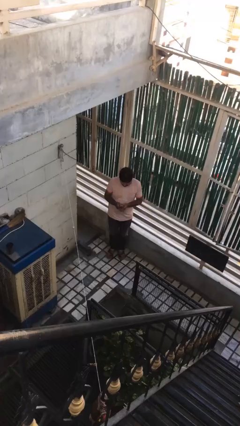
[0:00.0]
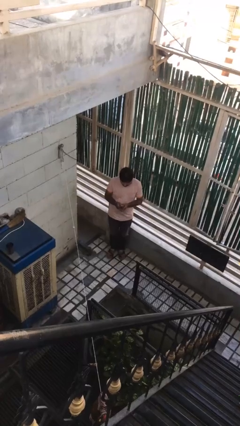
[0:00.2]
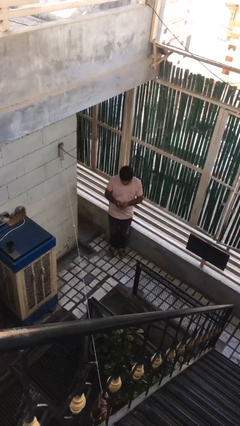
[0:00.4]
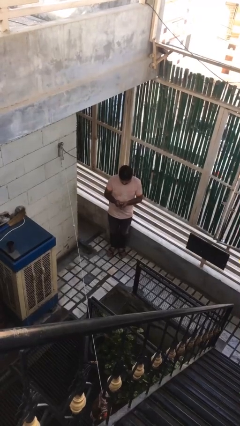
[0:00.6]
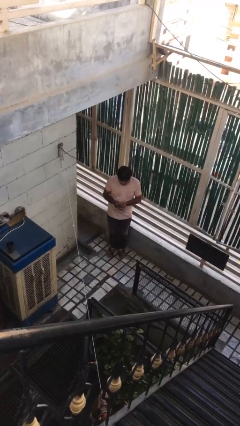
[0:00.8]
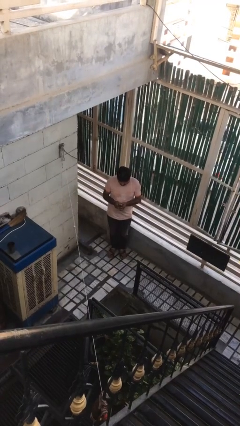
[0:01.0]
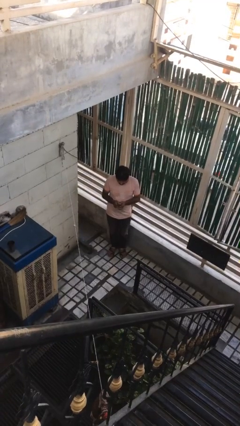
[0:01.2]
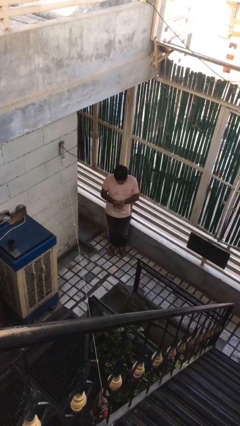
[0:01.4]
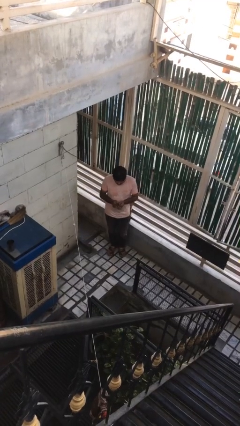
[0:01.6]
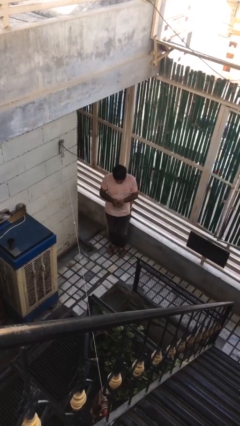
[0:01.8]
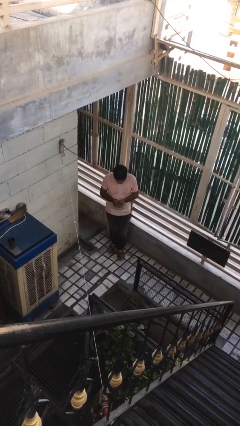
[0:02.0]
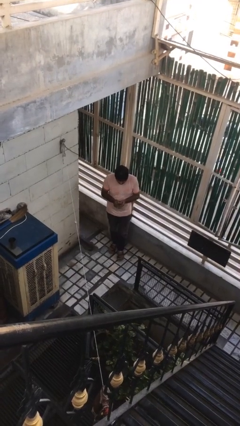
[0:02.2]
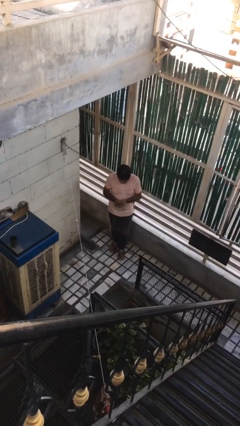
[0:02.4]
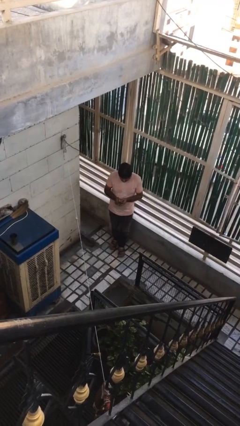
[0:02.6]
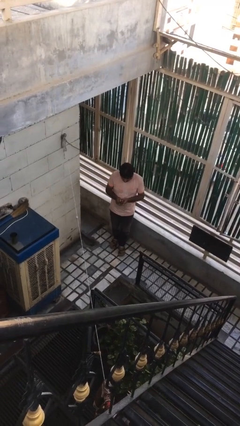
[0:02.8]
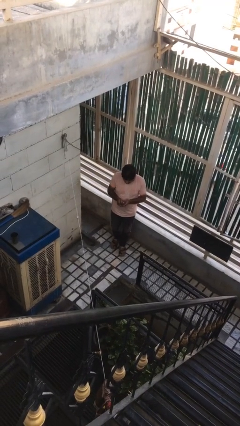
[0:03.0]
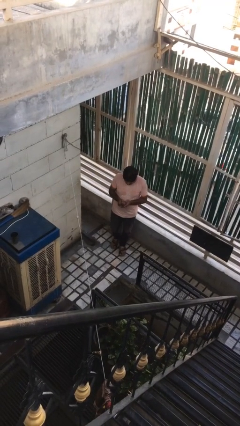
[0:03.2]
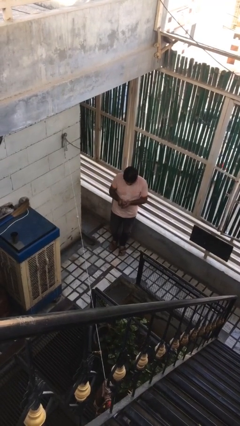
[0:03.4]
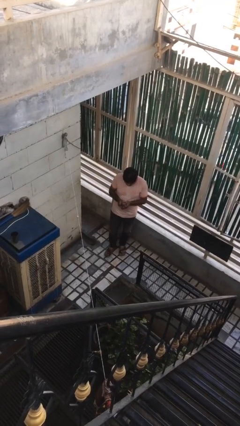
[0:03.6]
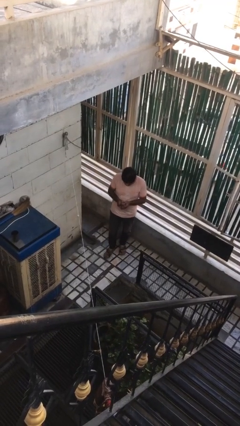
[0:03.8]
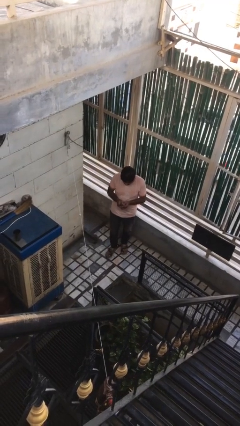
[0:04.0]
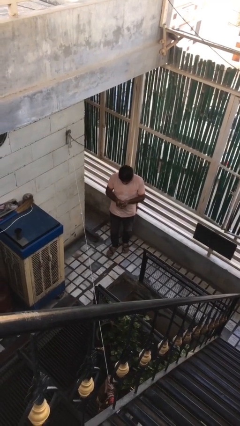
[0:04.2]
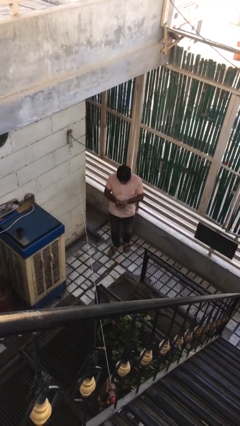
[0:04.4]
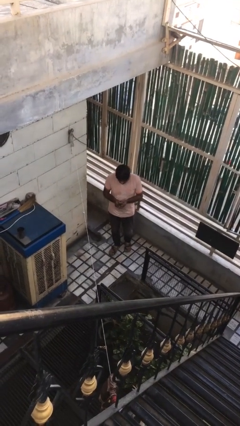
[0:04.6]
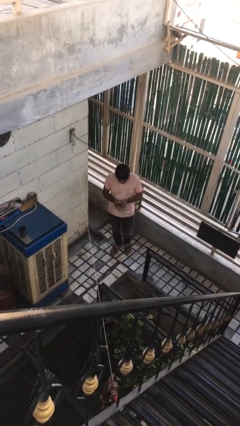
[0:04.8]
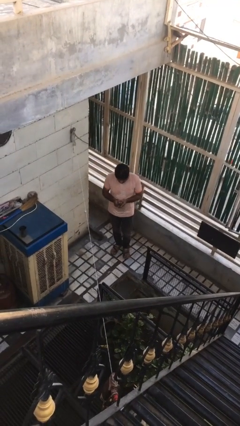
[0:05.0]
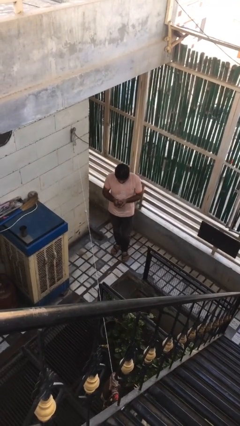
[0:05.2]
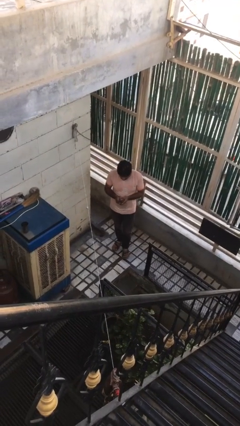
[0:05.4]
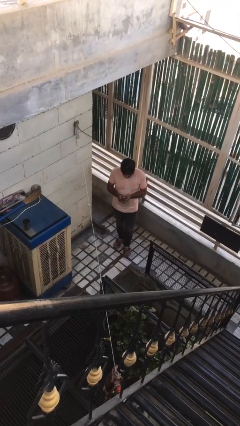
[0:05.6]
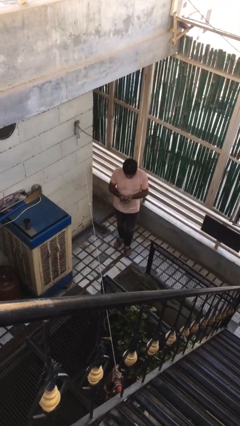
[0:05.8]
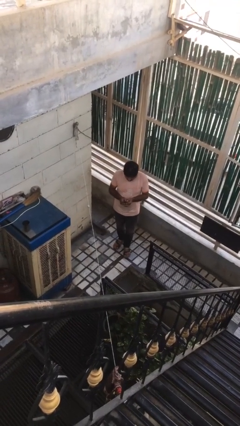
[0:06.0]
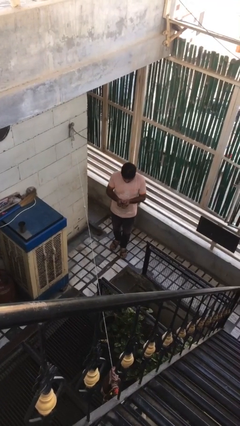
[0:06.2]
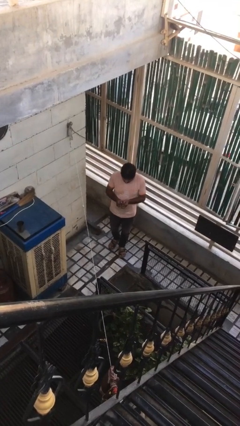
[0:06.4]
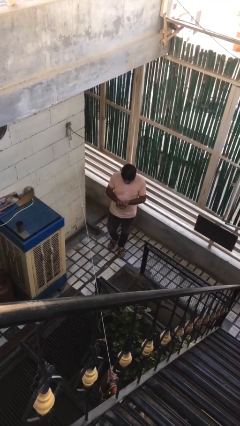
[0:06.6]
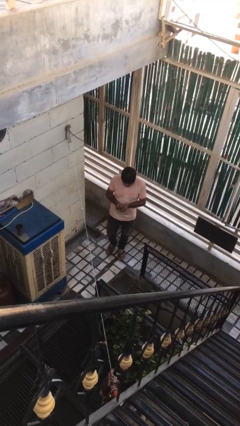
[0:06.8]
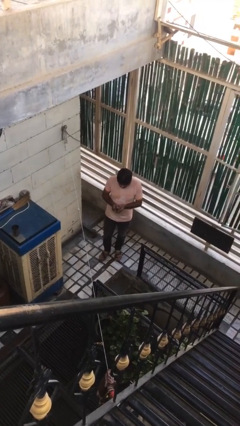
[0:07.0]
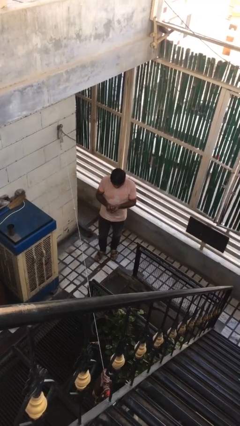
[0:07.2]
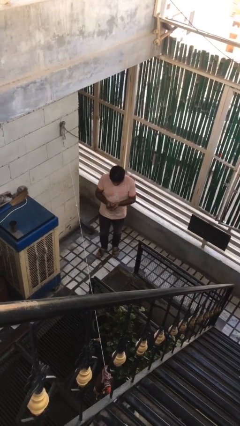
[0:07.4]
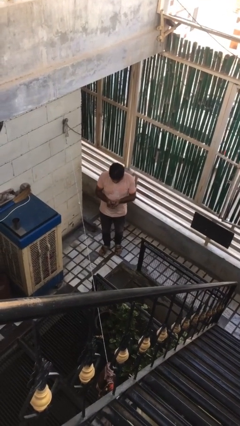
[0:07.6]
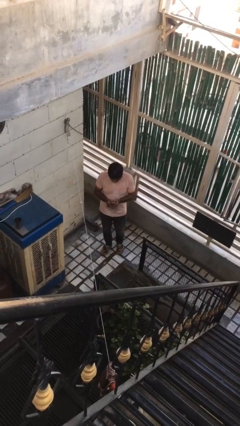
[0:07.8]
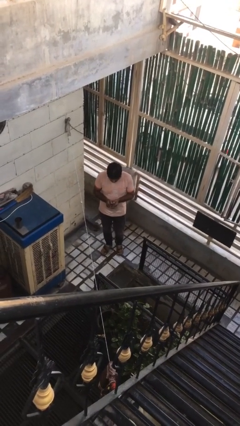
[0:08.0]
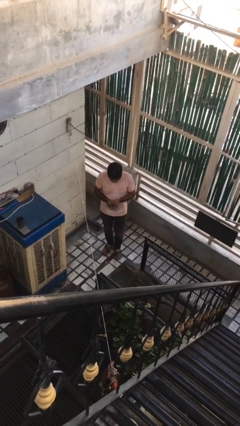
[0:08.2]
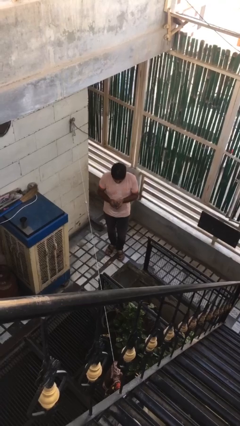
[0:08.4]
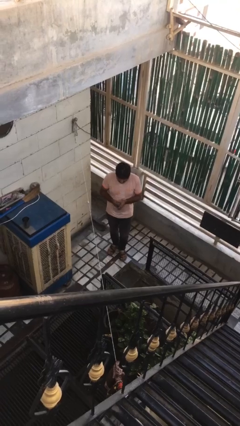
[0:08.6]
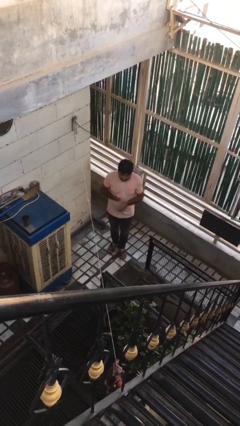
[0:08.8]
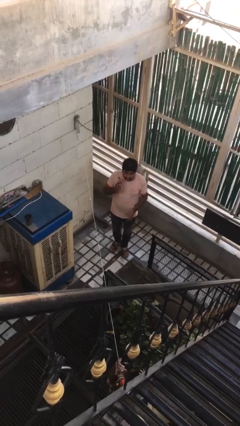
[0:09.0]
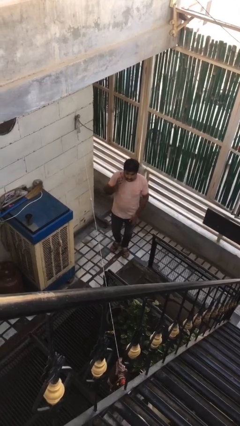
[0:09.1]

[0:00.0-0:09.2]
person texts on phone

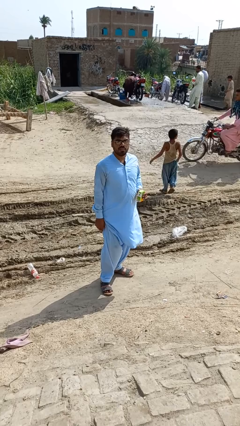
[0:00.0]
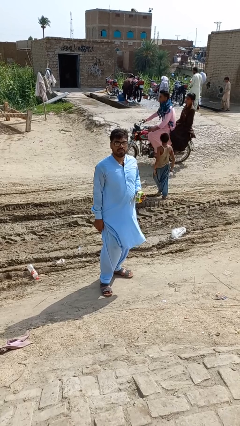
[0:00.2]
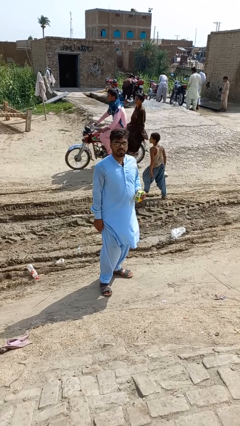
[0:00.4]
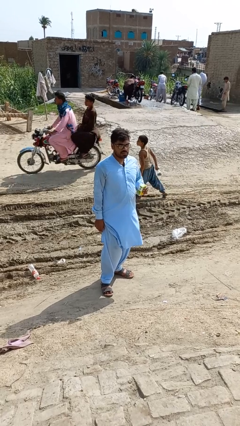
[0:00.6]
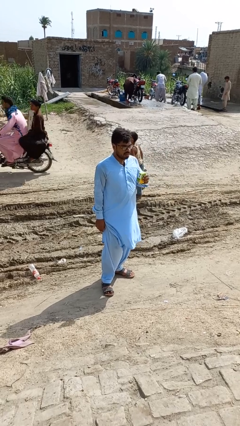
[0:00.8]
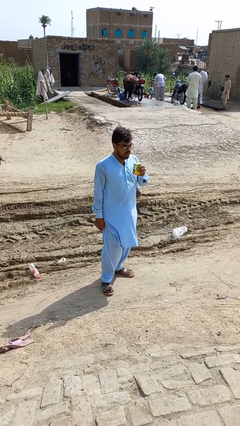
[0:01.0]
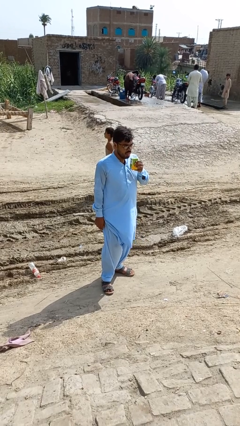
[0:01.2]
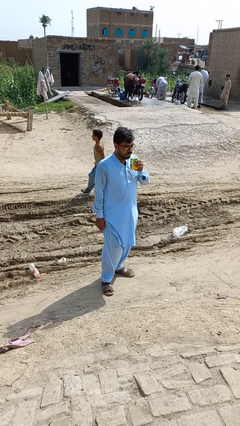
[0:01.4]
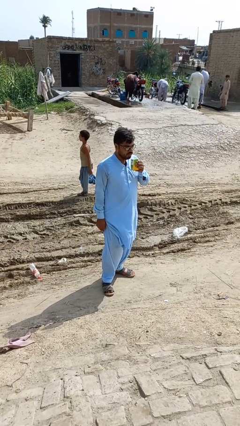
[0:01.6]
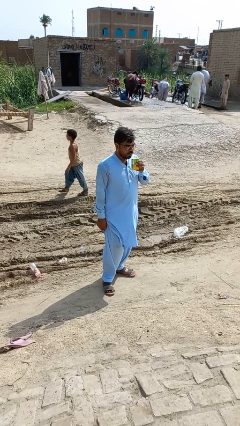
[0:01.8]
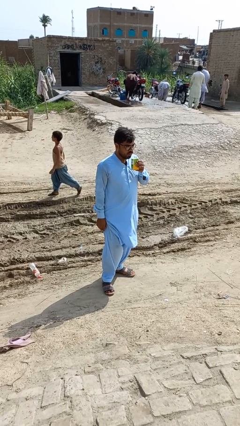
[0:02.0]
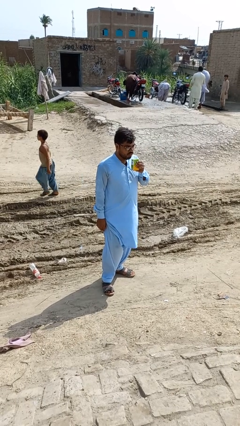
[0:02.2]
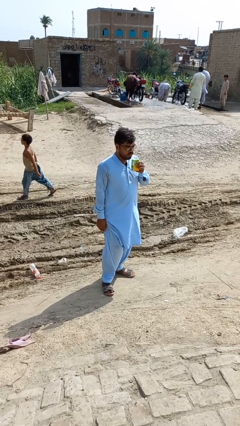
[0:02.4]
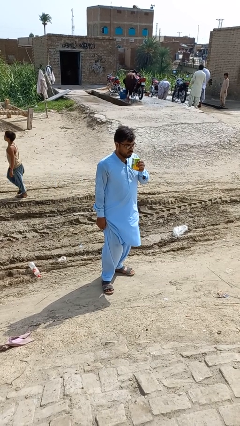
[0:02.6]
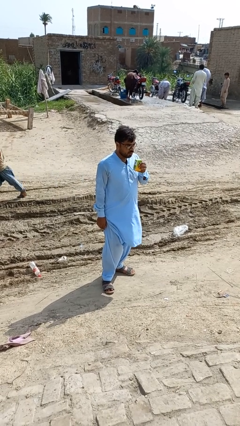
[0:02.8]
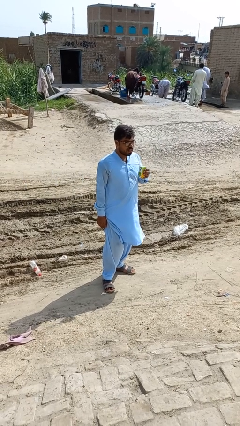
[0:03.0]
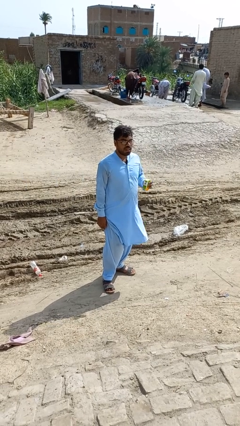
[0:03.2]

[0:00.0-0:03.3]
person drinks from straw

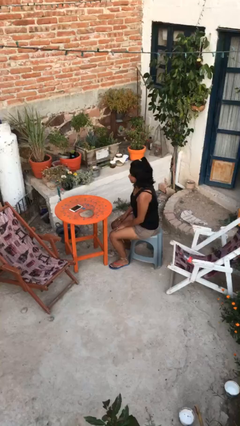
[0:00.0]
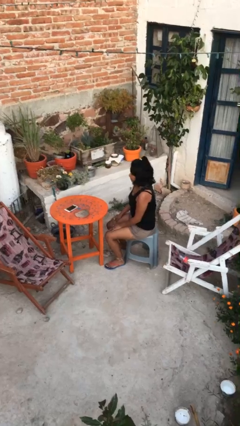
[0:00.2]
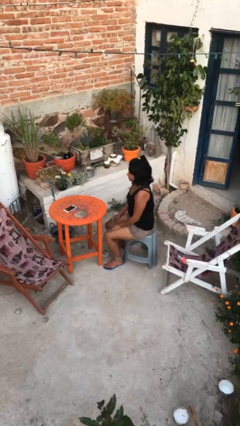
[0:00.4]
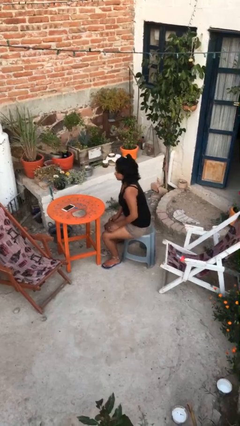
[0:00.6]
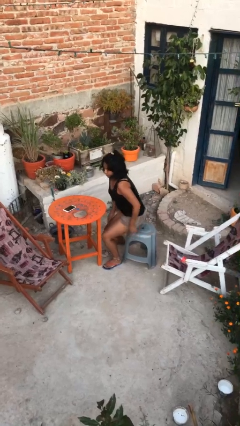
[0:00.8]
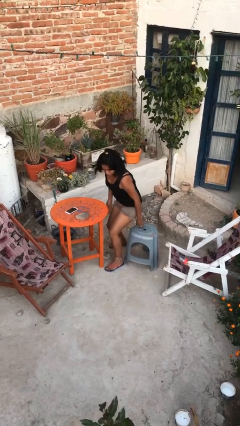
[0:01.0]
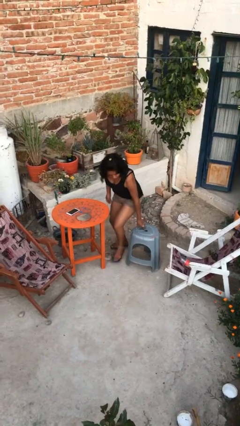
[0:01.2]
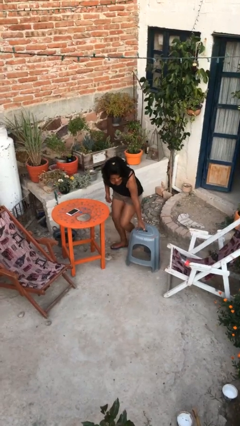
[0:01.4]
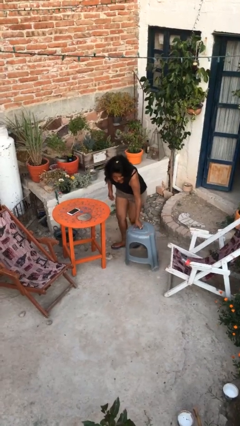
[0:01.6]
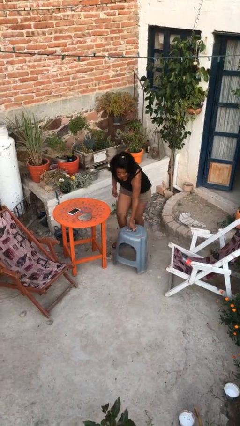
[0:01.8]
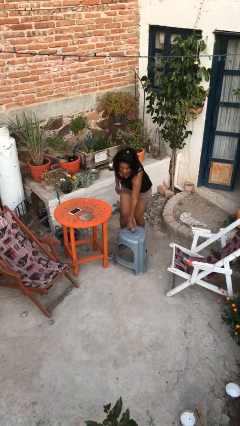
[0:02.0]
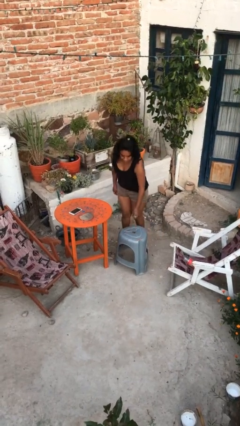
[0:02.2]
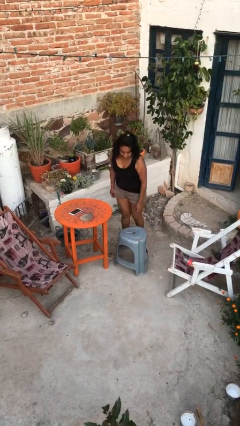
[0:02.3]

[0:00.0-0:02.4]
person stands up

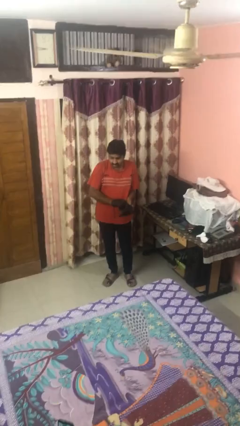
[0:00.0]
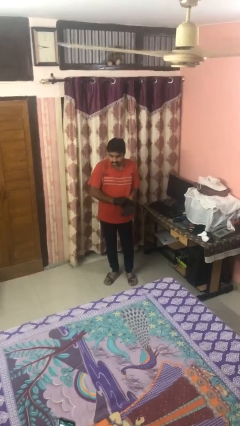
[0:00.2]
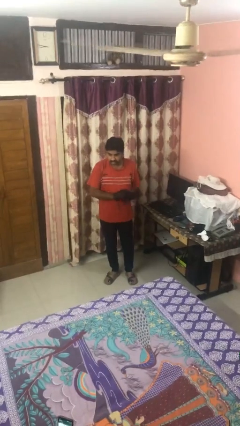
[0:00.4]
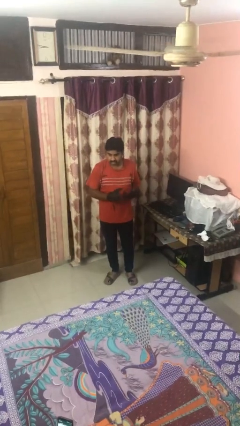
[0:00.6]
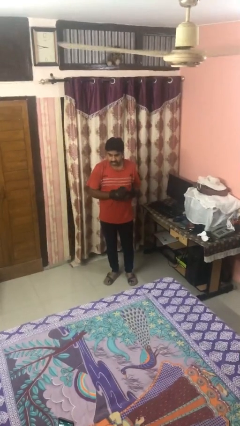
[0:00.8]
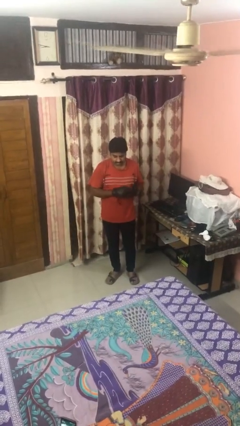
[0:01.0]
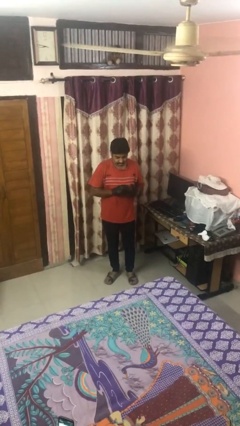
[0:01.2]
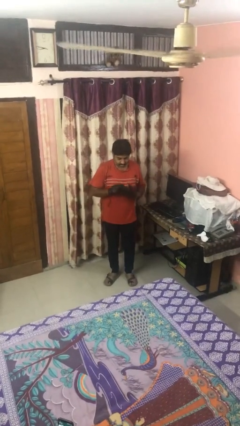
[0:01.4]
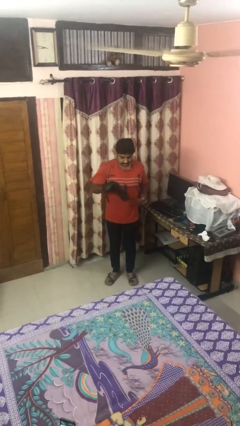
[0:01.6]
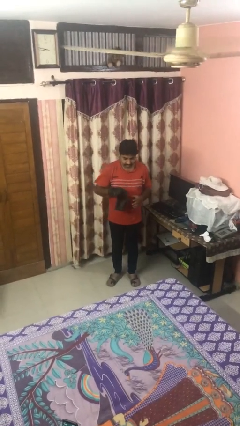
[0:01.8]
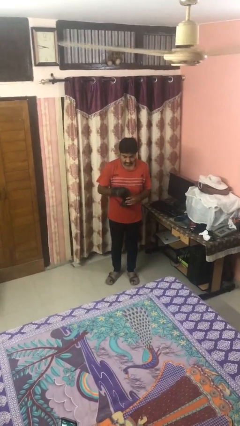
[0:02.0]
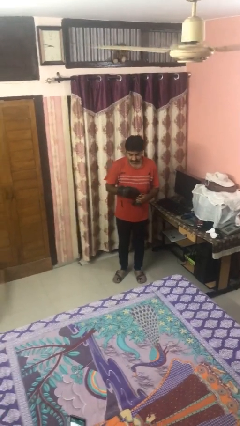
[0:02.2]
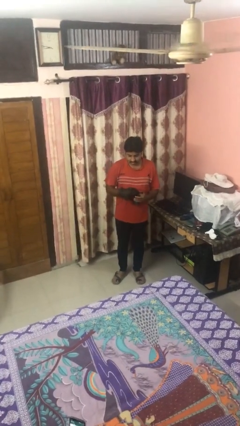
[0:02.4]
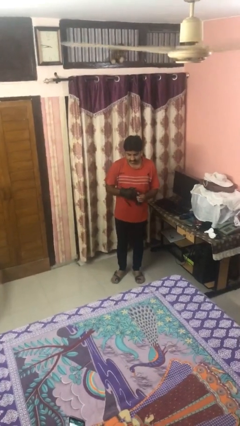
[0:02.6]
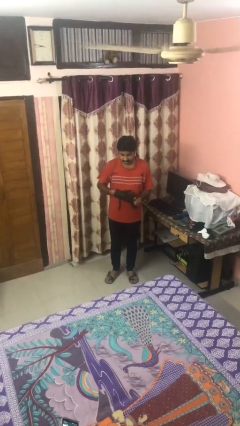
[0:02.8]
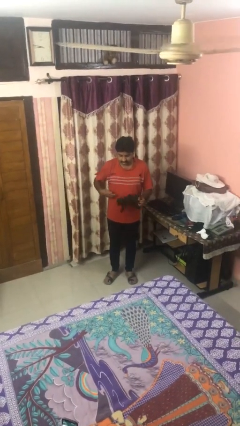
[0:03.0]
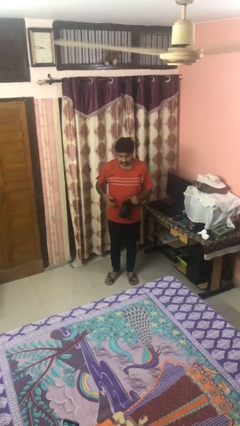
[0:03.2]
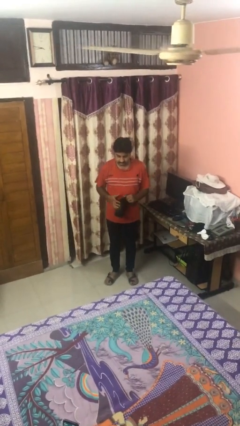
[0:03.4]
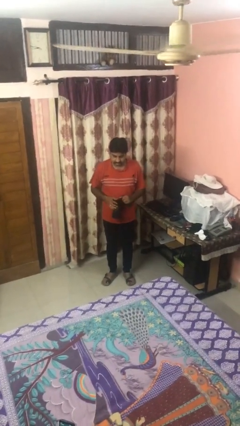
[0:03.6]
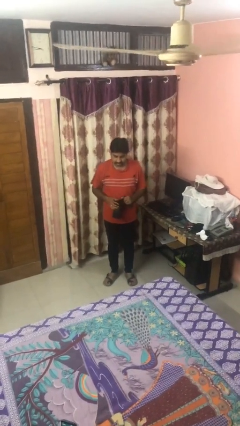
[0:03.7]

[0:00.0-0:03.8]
person takes off gloves
